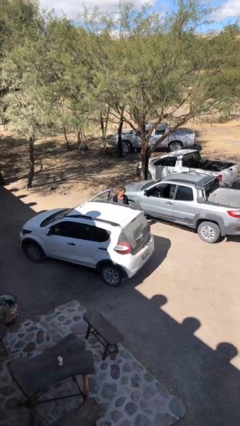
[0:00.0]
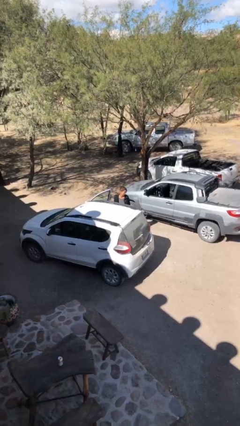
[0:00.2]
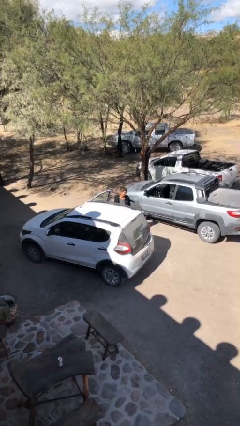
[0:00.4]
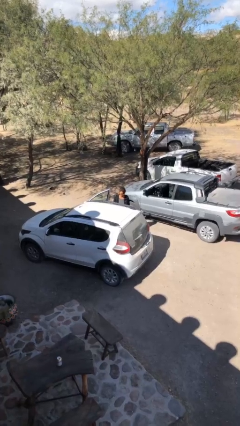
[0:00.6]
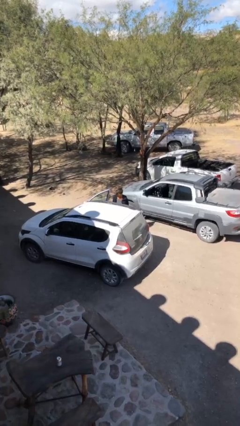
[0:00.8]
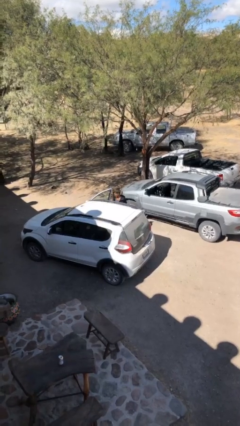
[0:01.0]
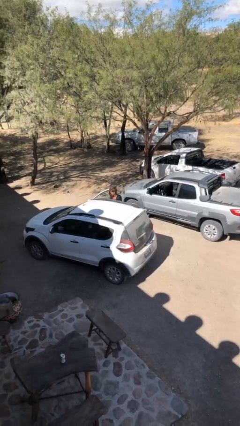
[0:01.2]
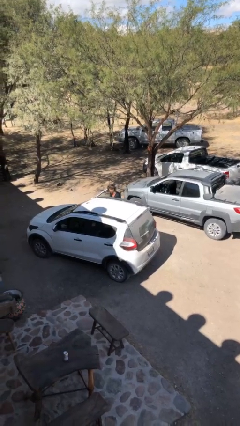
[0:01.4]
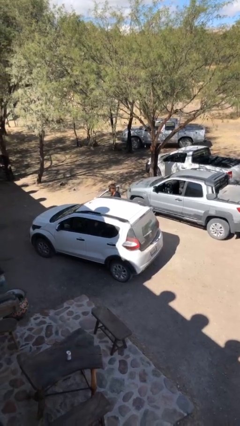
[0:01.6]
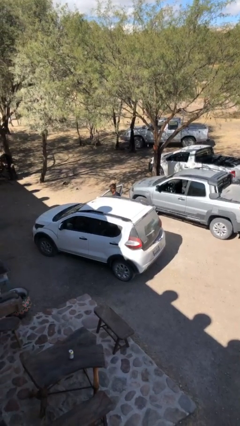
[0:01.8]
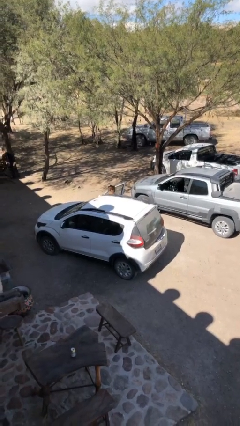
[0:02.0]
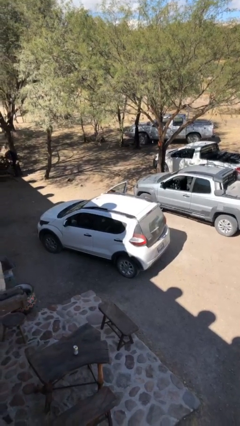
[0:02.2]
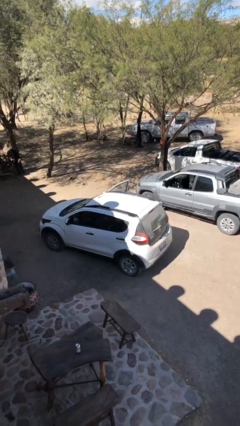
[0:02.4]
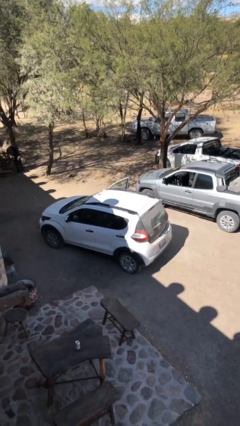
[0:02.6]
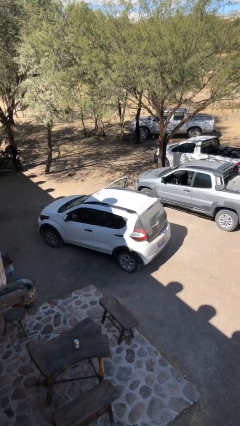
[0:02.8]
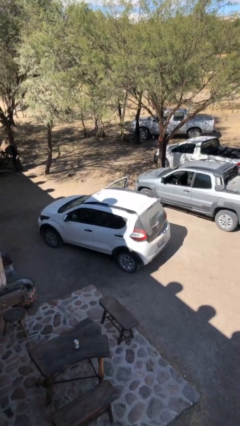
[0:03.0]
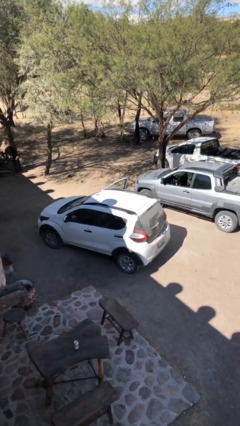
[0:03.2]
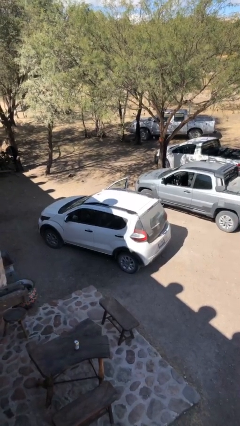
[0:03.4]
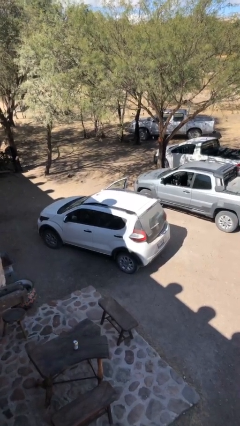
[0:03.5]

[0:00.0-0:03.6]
person enters car

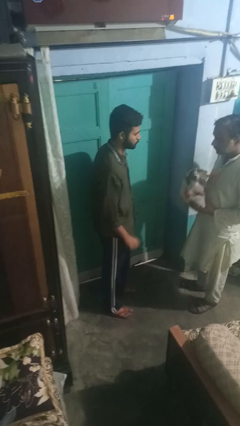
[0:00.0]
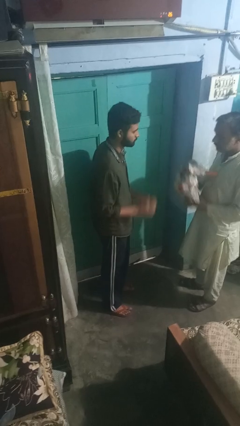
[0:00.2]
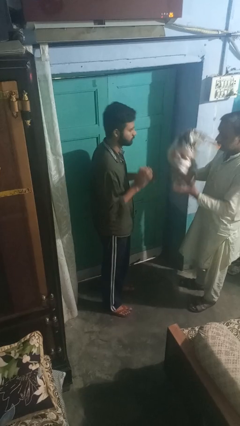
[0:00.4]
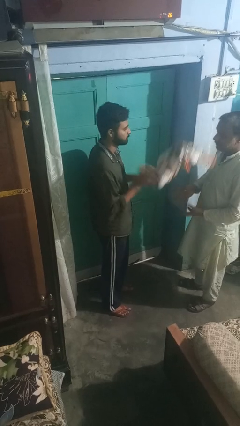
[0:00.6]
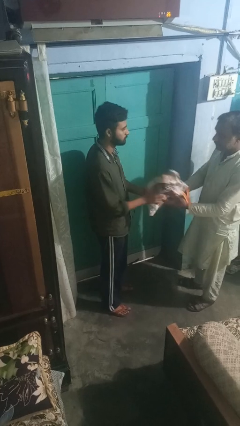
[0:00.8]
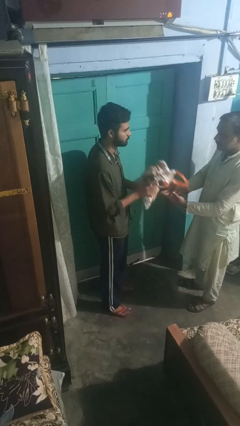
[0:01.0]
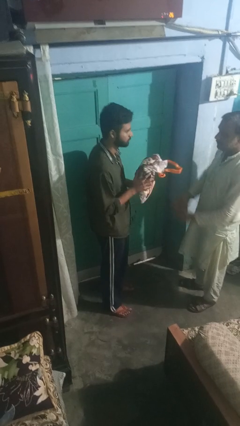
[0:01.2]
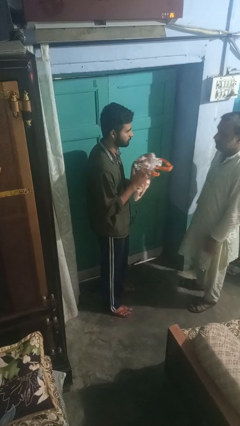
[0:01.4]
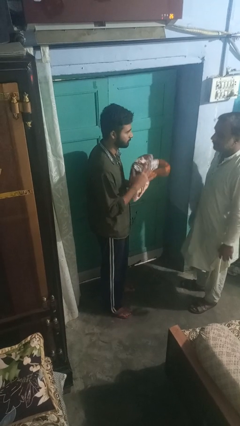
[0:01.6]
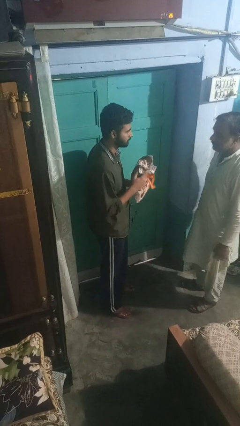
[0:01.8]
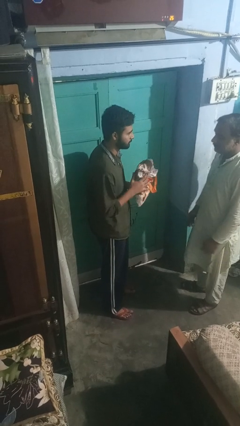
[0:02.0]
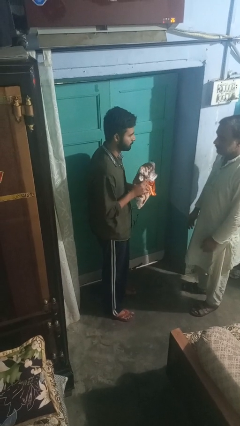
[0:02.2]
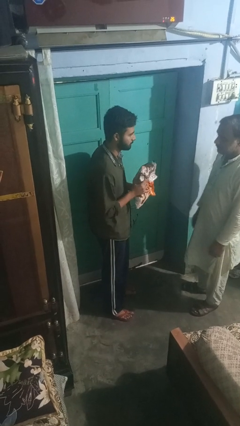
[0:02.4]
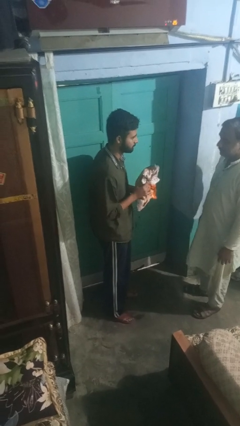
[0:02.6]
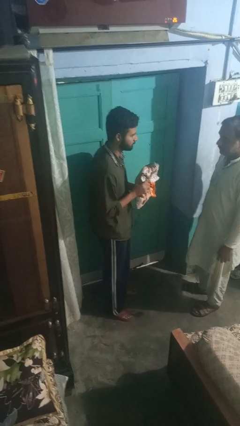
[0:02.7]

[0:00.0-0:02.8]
person catches object from person

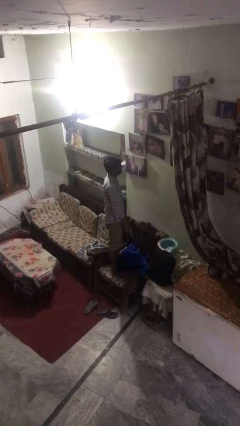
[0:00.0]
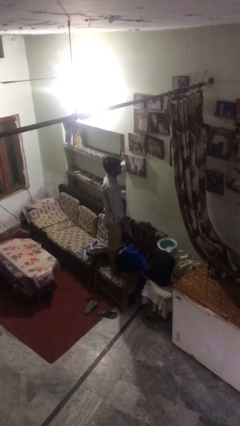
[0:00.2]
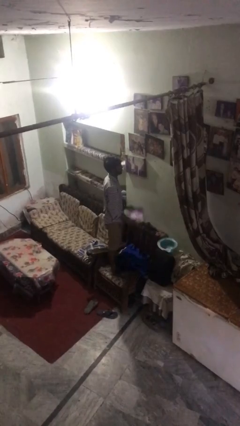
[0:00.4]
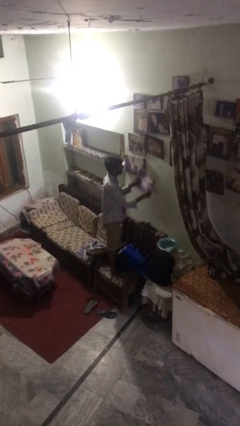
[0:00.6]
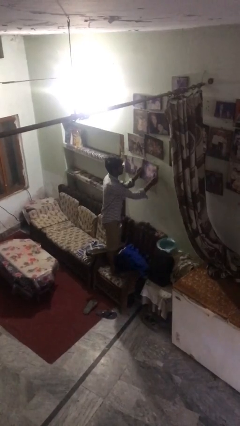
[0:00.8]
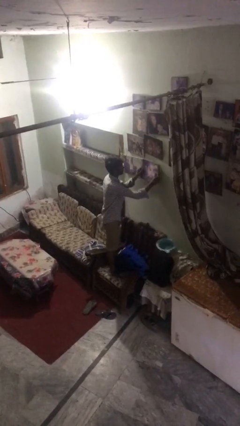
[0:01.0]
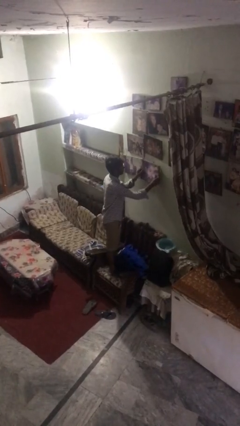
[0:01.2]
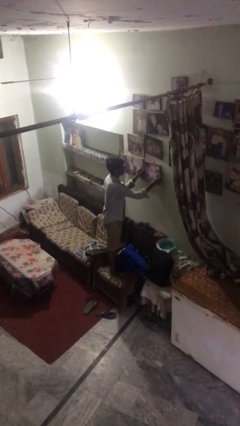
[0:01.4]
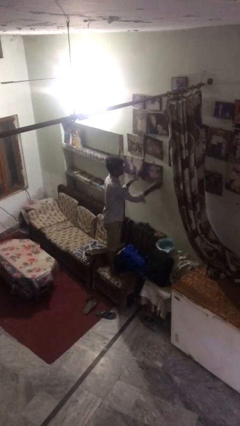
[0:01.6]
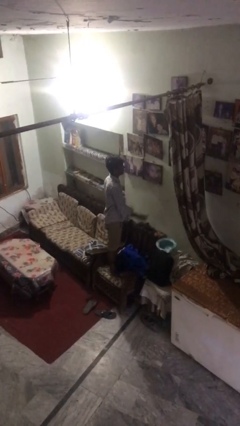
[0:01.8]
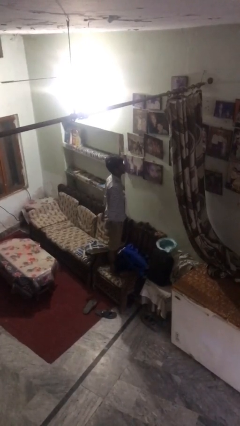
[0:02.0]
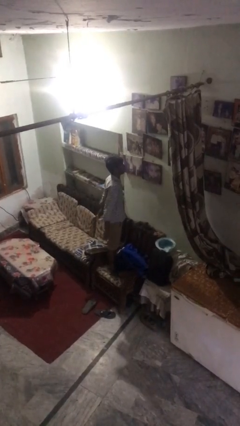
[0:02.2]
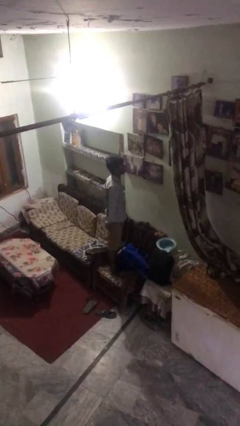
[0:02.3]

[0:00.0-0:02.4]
person puts up picture frame

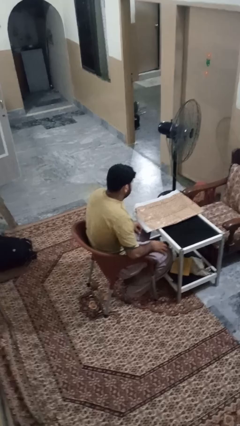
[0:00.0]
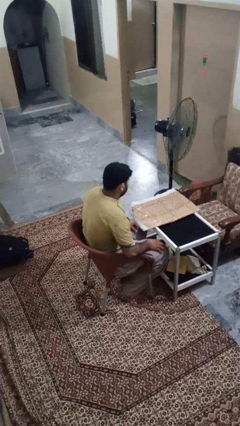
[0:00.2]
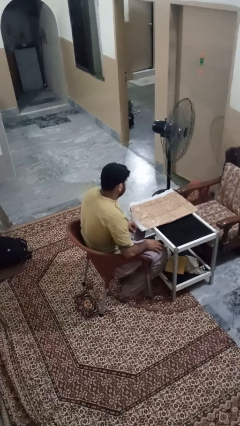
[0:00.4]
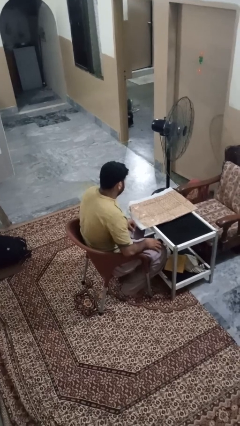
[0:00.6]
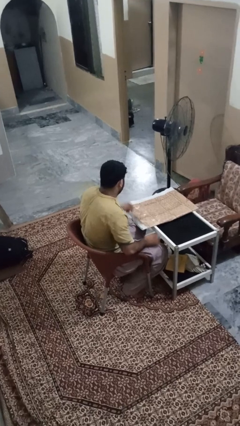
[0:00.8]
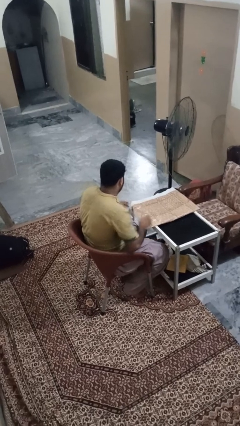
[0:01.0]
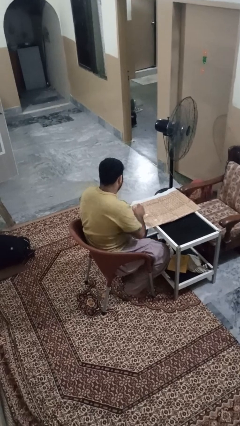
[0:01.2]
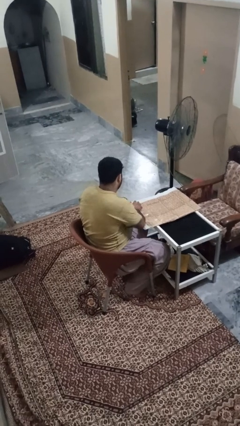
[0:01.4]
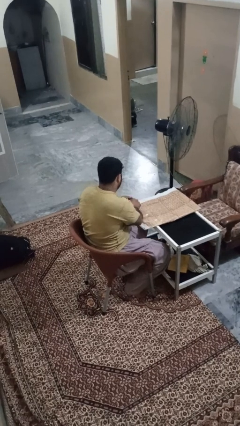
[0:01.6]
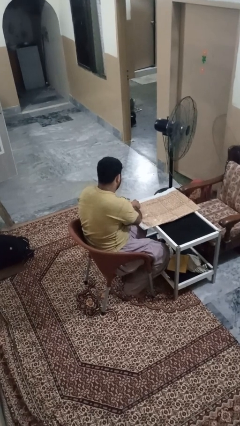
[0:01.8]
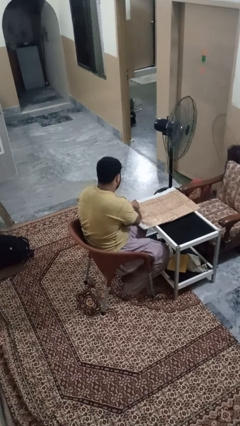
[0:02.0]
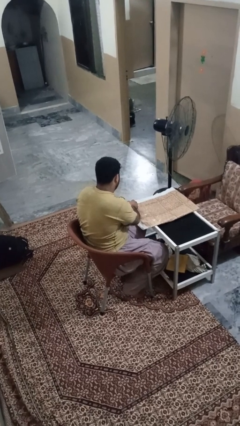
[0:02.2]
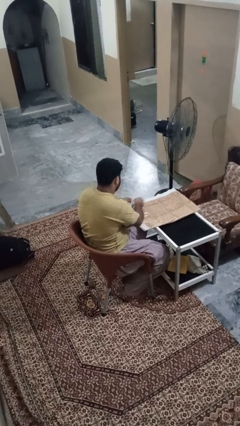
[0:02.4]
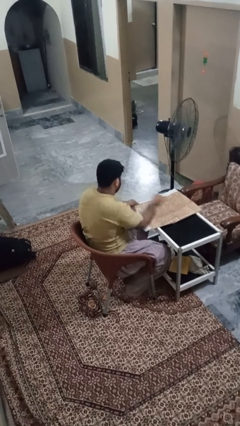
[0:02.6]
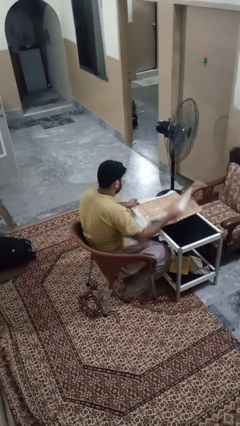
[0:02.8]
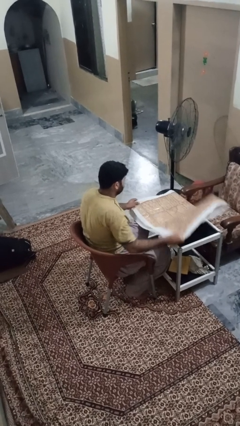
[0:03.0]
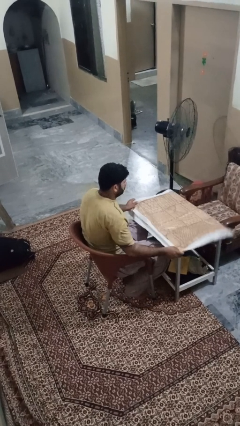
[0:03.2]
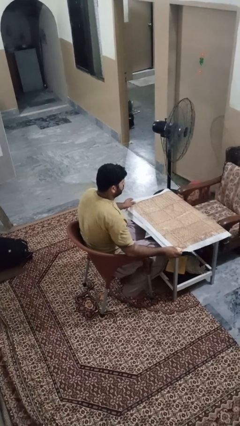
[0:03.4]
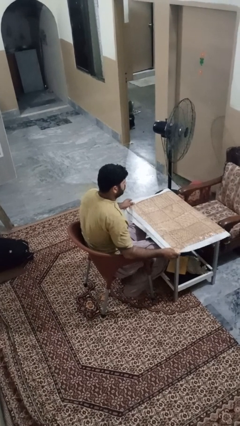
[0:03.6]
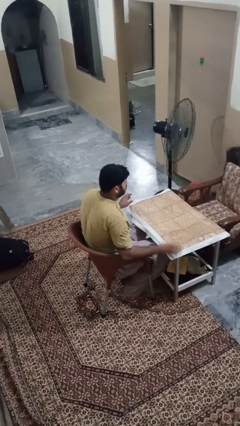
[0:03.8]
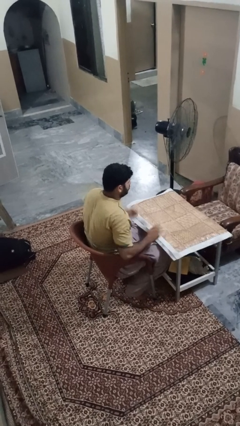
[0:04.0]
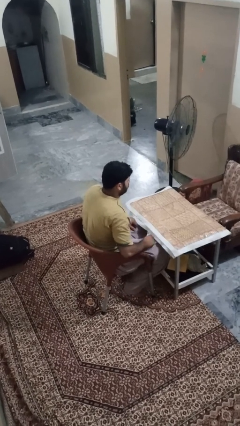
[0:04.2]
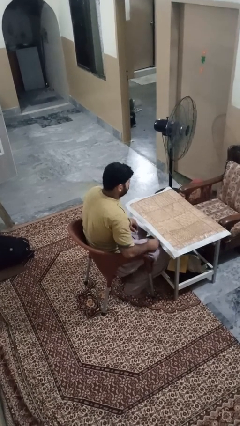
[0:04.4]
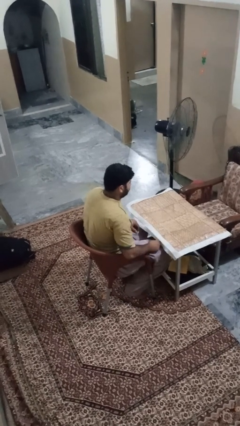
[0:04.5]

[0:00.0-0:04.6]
person spreads tablecloth

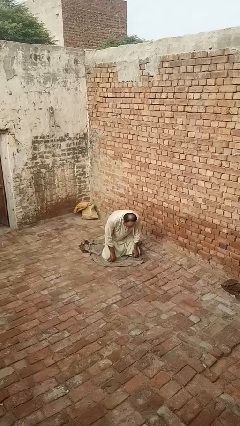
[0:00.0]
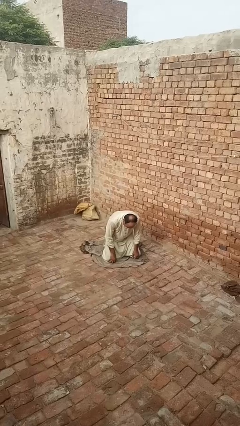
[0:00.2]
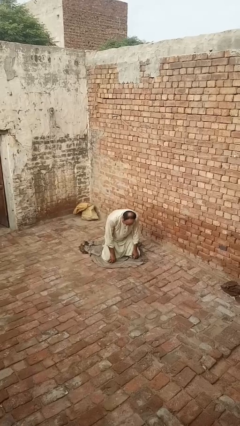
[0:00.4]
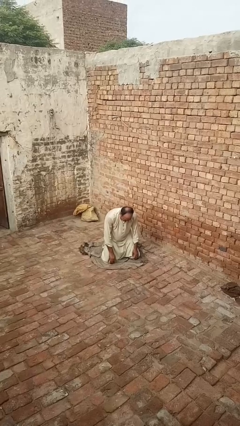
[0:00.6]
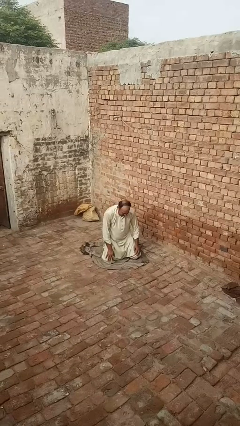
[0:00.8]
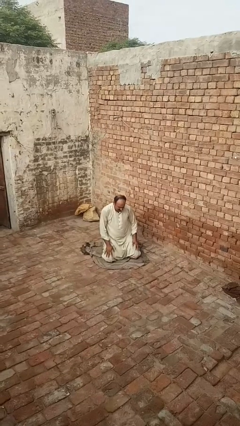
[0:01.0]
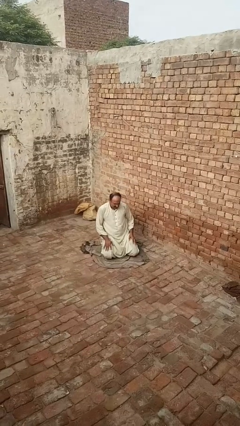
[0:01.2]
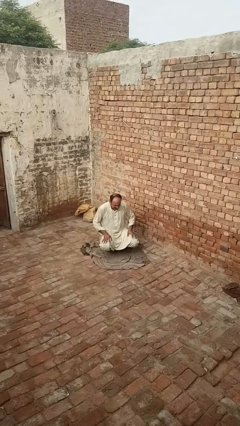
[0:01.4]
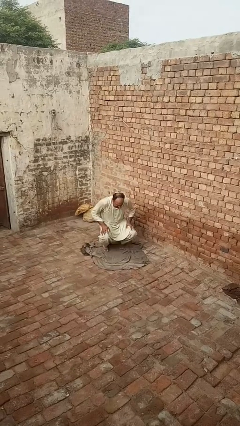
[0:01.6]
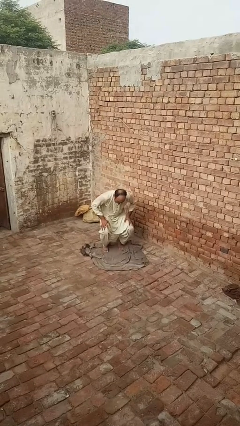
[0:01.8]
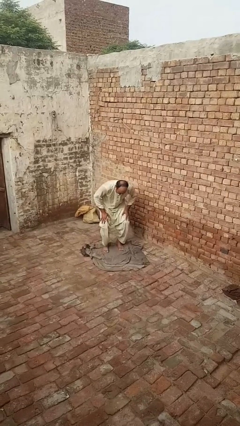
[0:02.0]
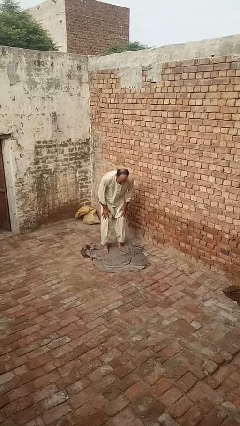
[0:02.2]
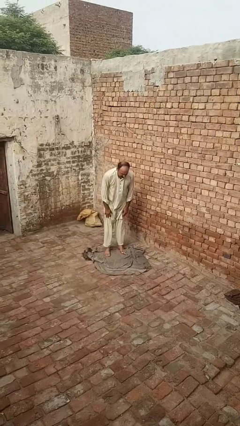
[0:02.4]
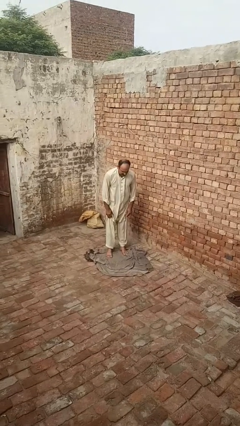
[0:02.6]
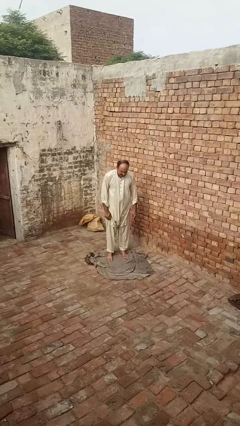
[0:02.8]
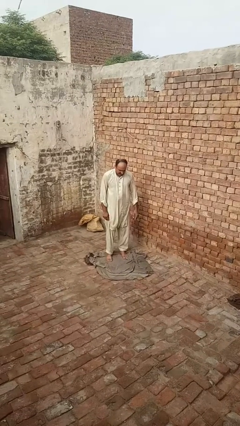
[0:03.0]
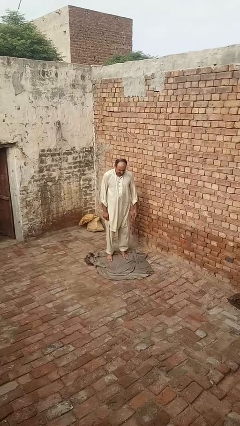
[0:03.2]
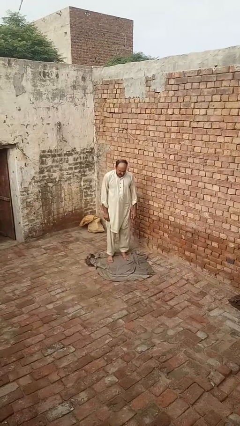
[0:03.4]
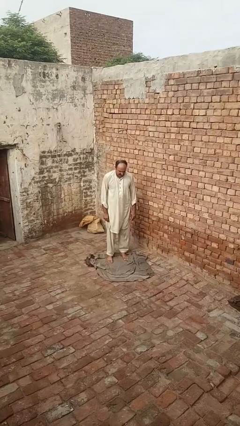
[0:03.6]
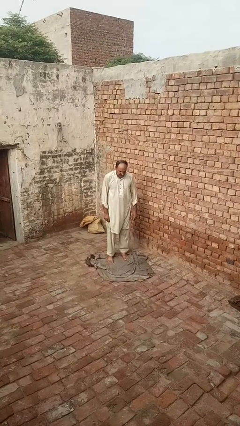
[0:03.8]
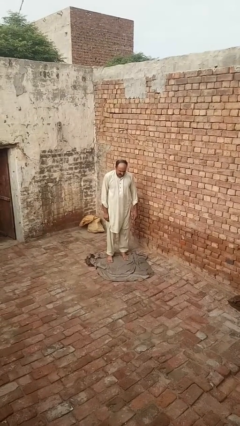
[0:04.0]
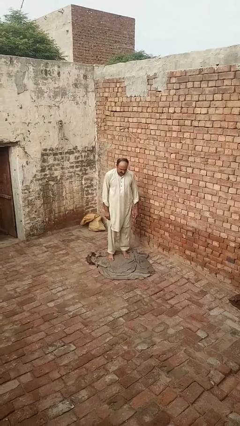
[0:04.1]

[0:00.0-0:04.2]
person stands up from floor
